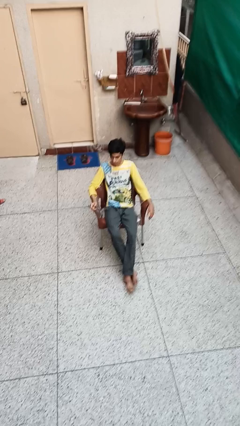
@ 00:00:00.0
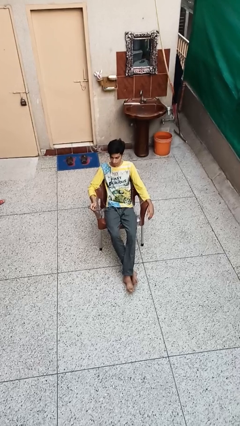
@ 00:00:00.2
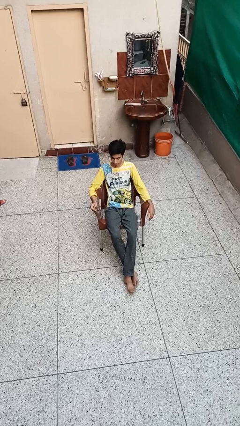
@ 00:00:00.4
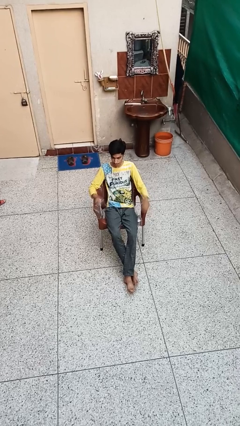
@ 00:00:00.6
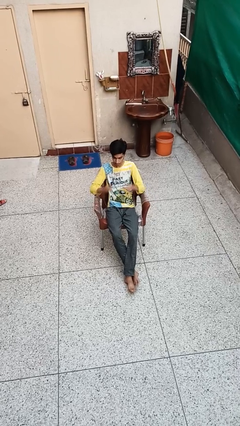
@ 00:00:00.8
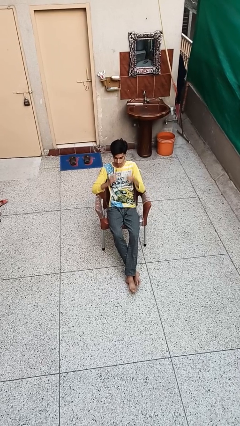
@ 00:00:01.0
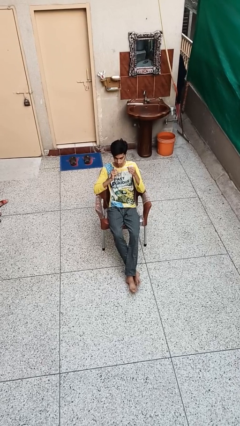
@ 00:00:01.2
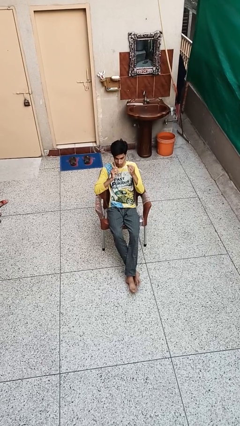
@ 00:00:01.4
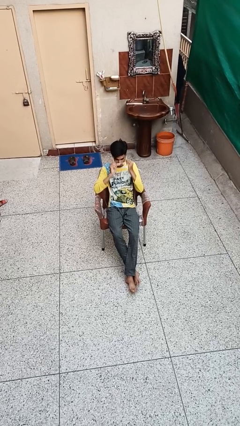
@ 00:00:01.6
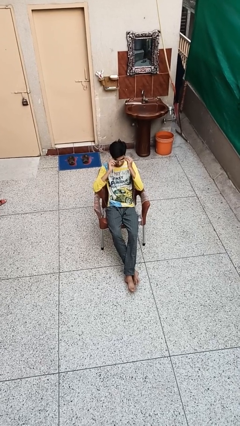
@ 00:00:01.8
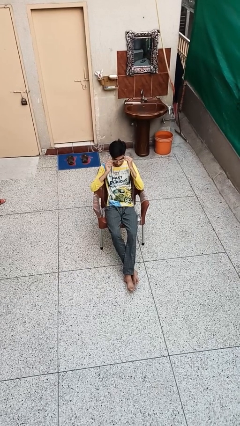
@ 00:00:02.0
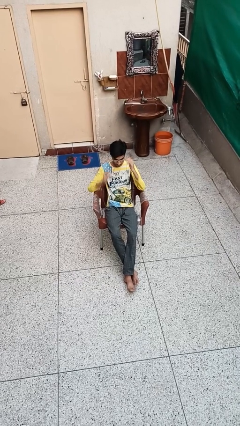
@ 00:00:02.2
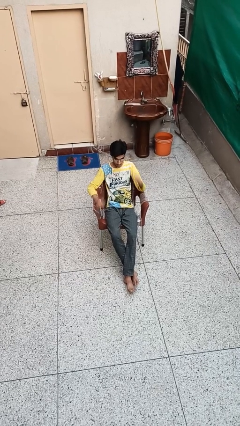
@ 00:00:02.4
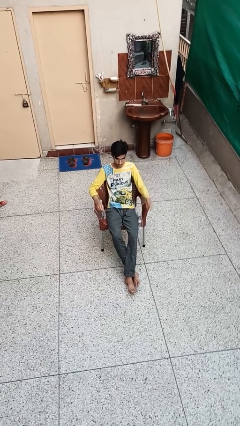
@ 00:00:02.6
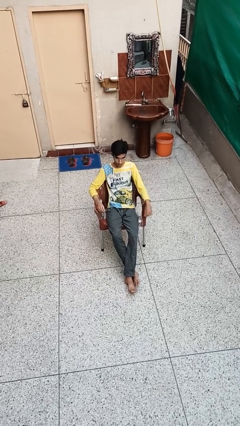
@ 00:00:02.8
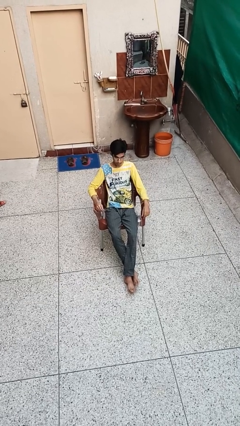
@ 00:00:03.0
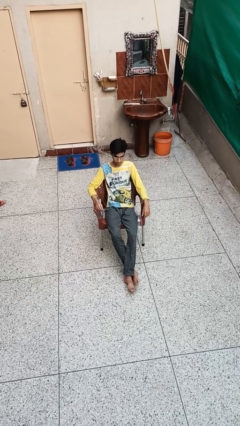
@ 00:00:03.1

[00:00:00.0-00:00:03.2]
person puts on glasses

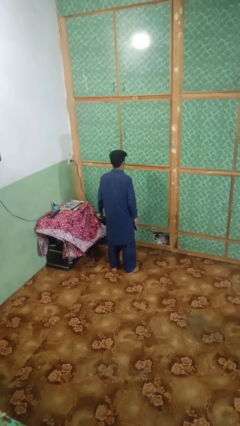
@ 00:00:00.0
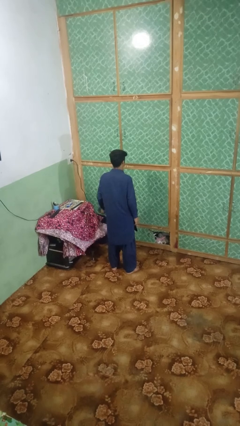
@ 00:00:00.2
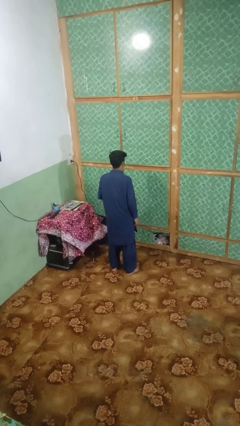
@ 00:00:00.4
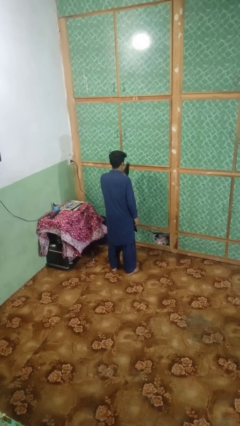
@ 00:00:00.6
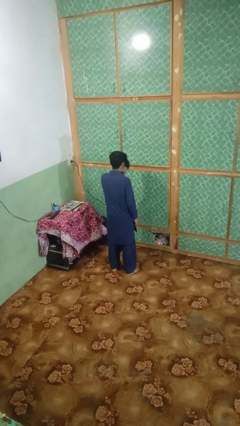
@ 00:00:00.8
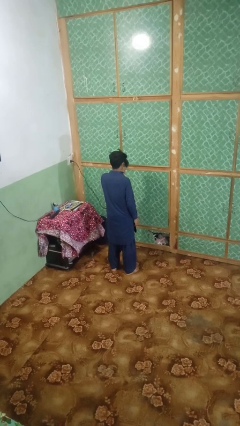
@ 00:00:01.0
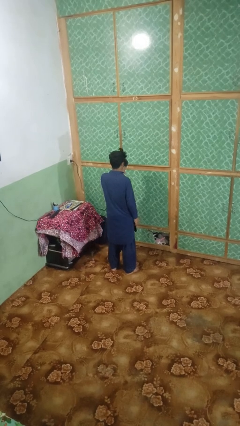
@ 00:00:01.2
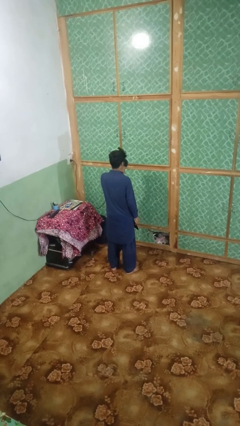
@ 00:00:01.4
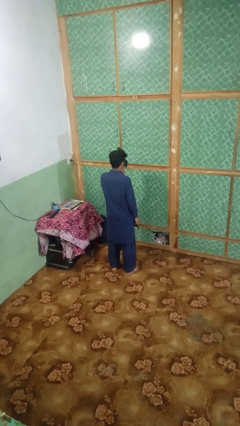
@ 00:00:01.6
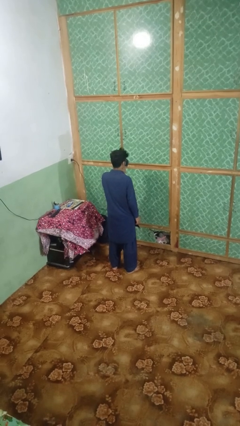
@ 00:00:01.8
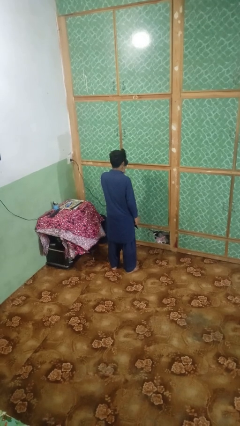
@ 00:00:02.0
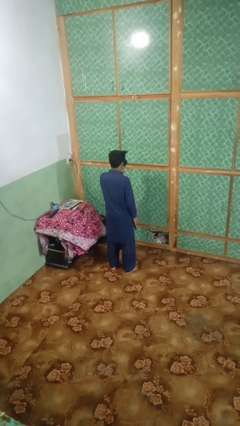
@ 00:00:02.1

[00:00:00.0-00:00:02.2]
person dries hair with hairdryer

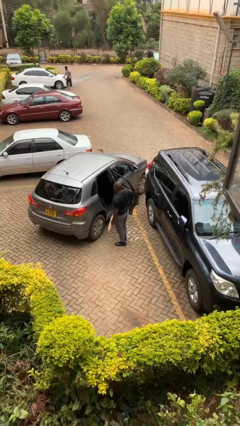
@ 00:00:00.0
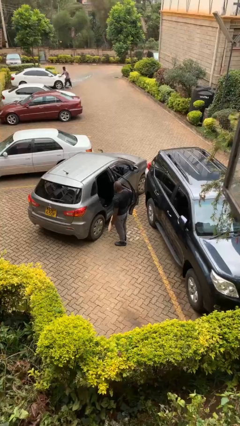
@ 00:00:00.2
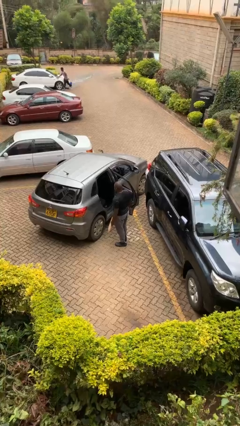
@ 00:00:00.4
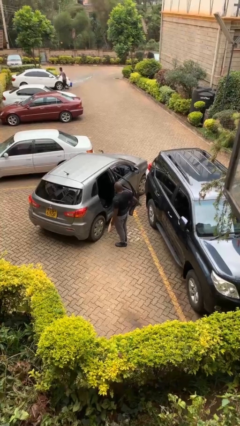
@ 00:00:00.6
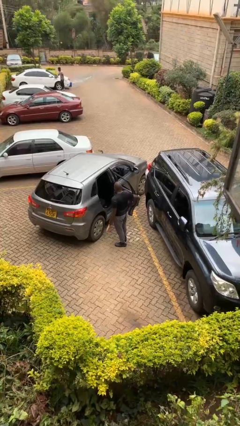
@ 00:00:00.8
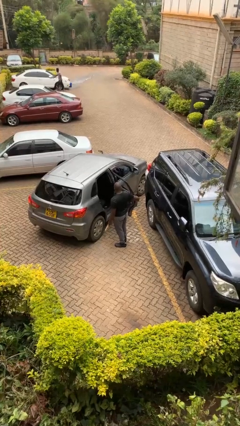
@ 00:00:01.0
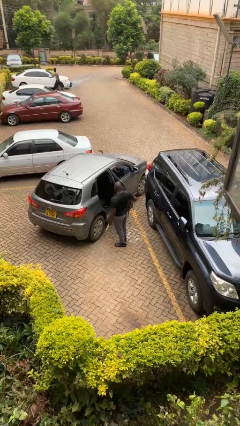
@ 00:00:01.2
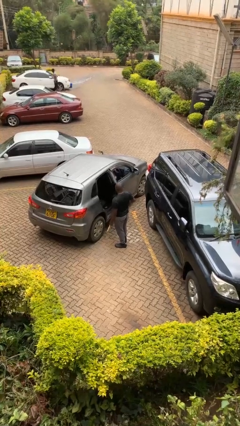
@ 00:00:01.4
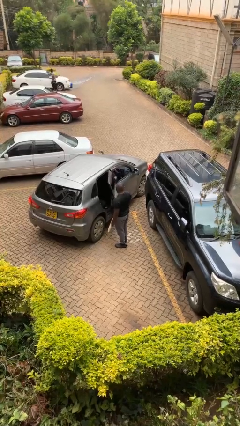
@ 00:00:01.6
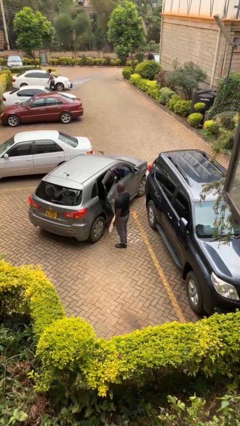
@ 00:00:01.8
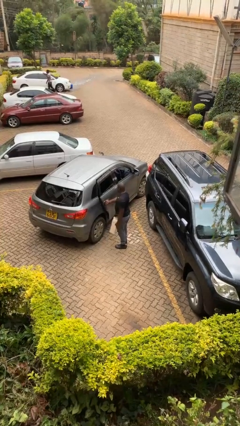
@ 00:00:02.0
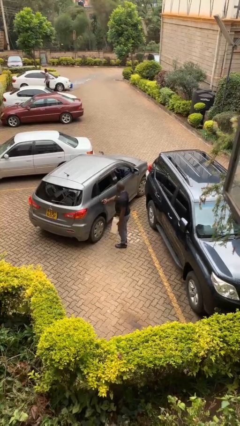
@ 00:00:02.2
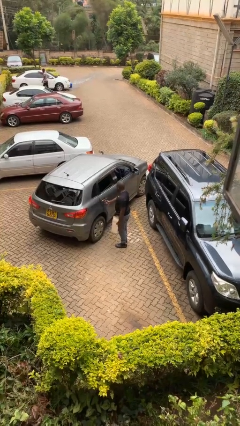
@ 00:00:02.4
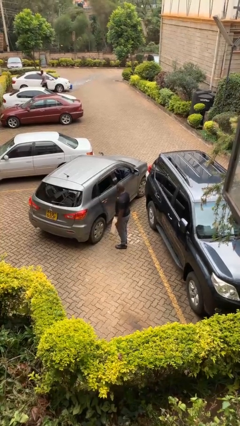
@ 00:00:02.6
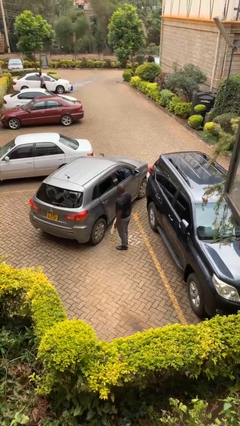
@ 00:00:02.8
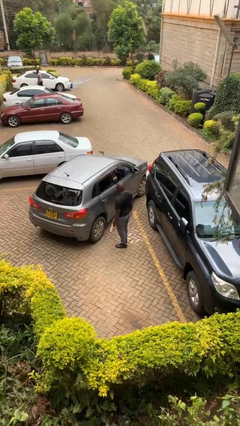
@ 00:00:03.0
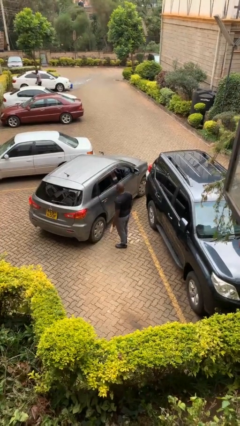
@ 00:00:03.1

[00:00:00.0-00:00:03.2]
person closes car door

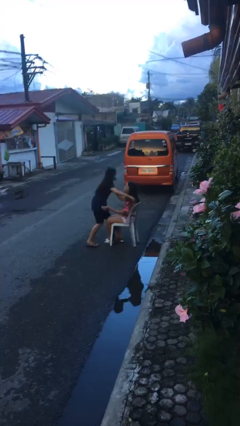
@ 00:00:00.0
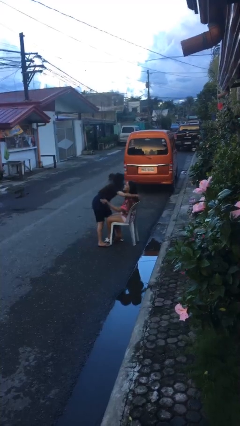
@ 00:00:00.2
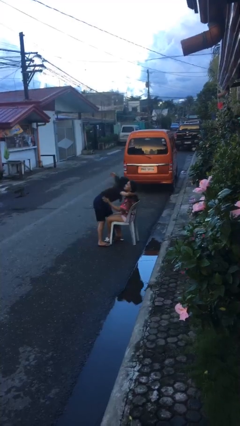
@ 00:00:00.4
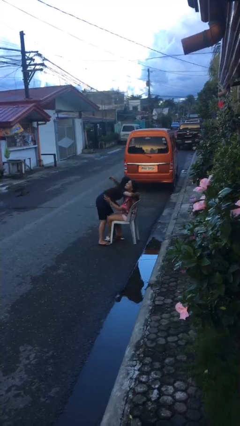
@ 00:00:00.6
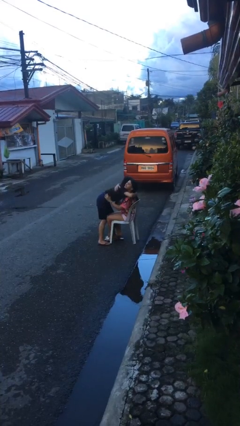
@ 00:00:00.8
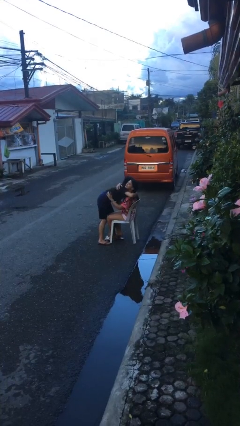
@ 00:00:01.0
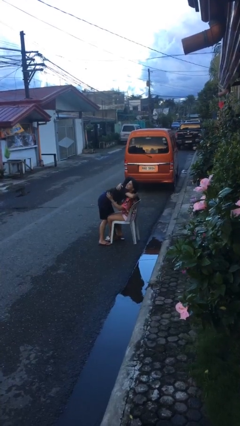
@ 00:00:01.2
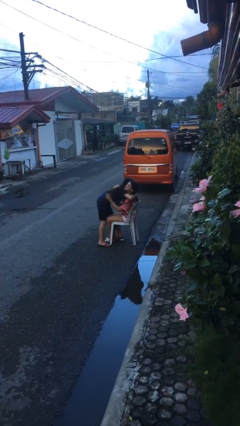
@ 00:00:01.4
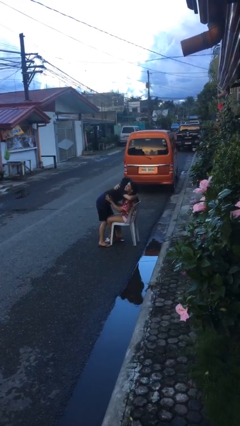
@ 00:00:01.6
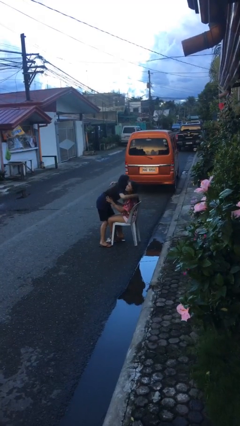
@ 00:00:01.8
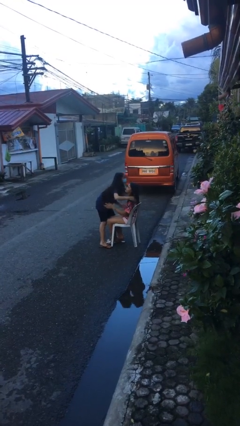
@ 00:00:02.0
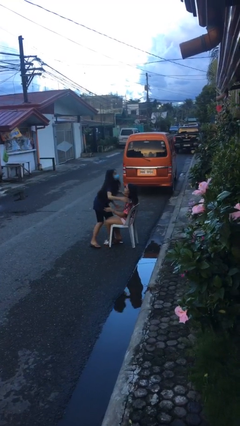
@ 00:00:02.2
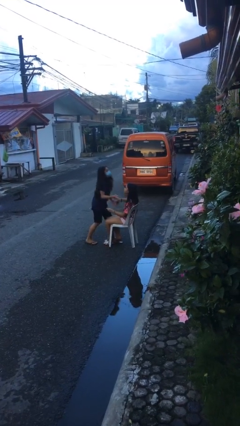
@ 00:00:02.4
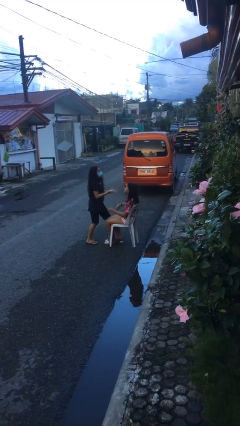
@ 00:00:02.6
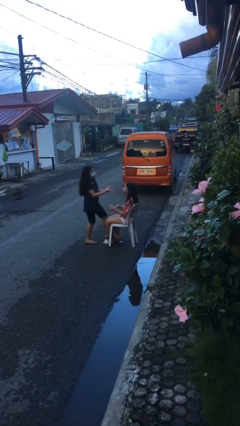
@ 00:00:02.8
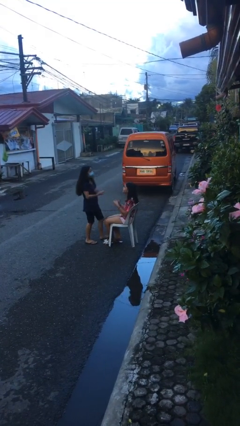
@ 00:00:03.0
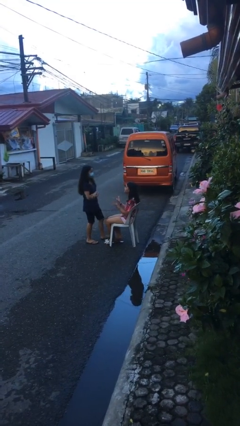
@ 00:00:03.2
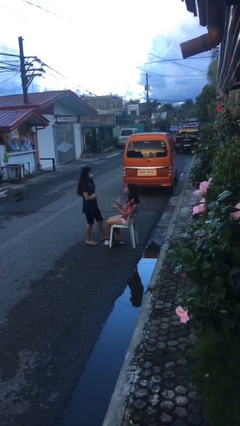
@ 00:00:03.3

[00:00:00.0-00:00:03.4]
person embraces person

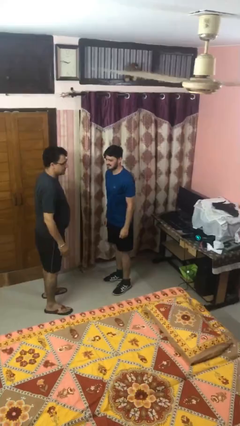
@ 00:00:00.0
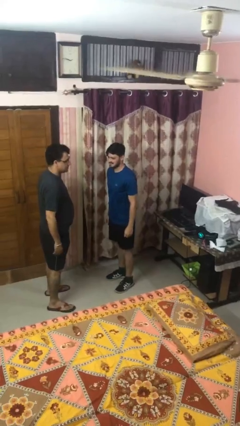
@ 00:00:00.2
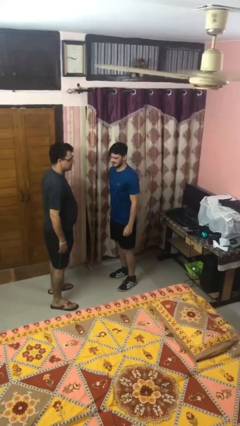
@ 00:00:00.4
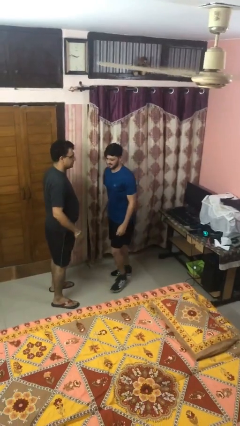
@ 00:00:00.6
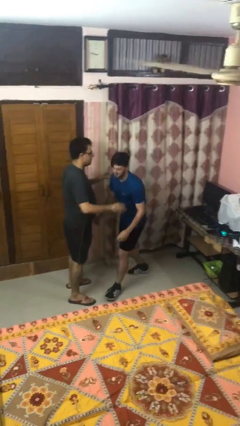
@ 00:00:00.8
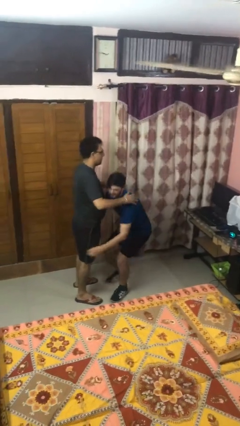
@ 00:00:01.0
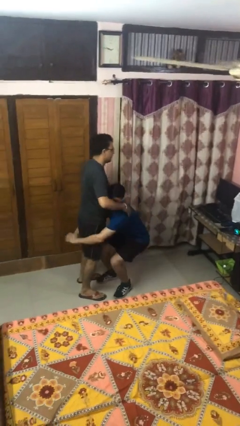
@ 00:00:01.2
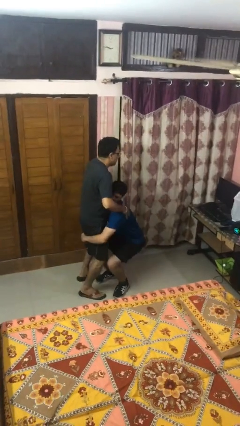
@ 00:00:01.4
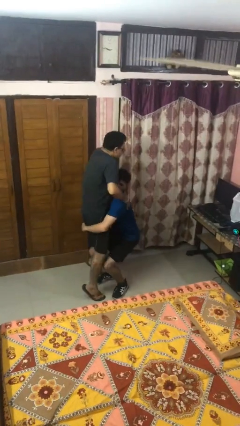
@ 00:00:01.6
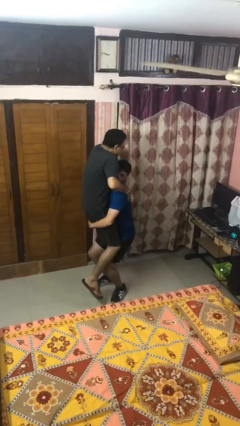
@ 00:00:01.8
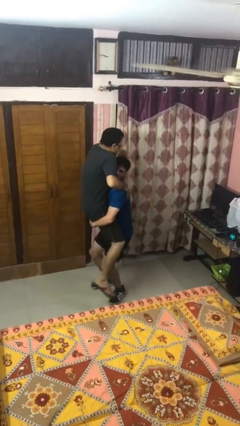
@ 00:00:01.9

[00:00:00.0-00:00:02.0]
person picks up person

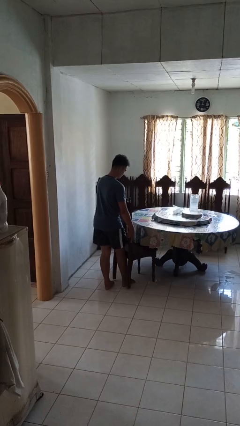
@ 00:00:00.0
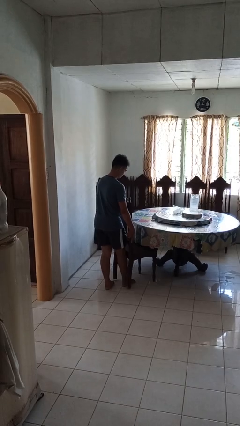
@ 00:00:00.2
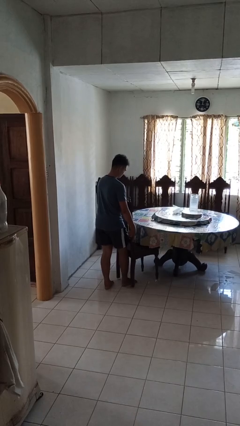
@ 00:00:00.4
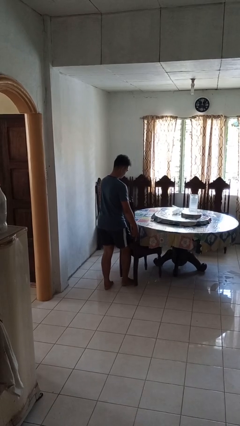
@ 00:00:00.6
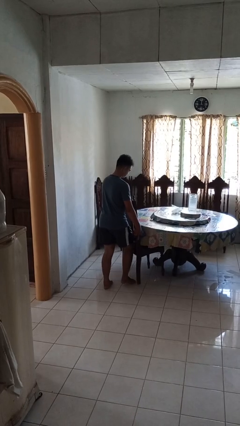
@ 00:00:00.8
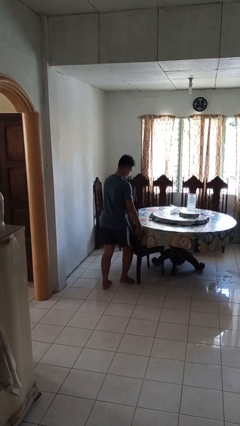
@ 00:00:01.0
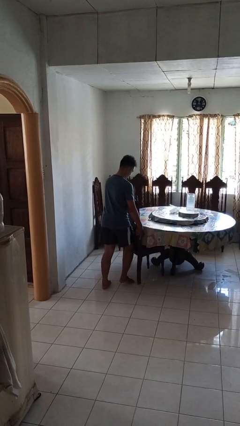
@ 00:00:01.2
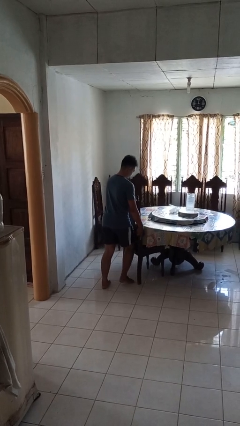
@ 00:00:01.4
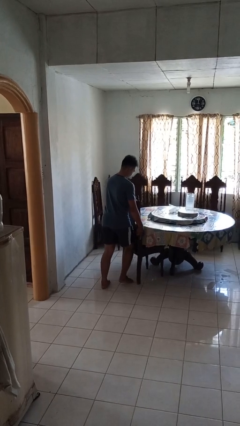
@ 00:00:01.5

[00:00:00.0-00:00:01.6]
person pushes in chair

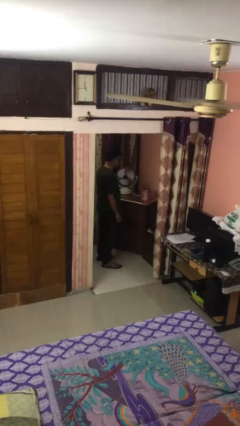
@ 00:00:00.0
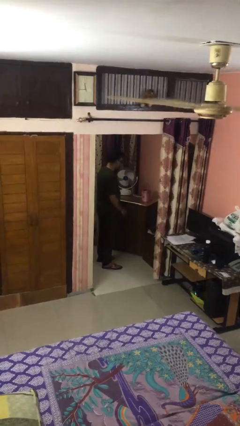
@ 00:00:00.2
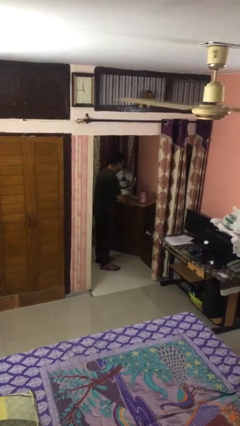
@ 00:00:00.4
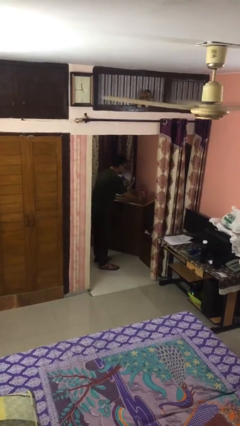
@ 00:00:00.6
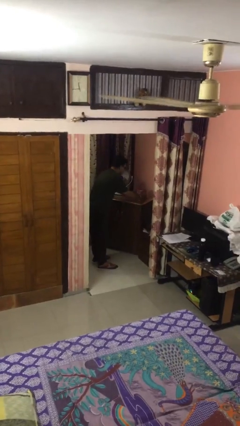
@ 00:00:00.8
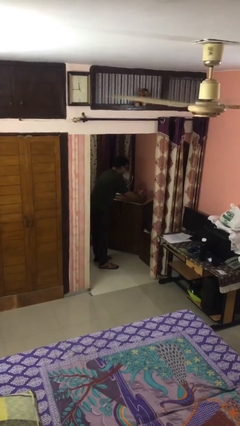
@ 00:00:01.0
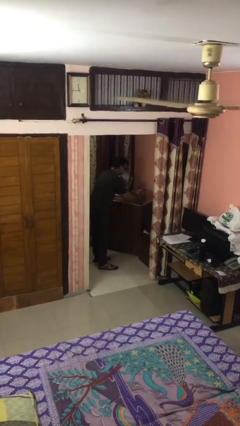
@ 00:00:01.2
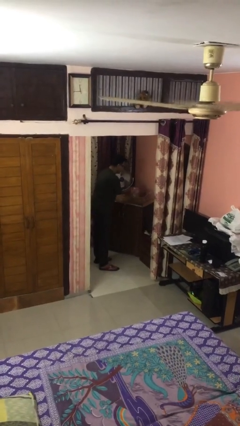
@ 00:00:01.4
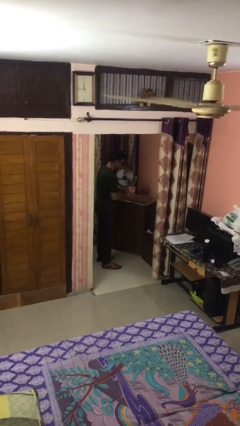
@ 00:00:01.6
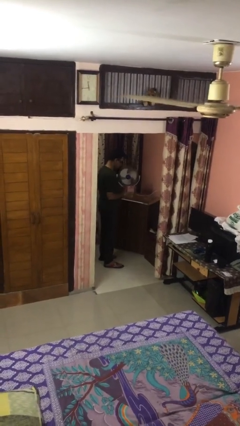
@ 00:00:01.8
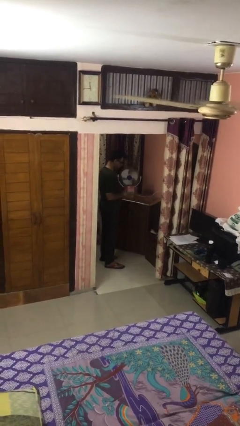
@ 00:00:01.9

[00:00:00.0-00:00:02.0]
person picks up object from countertop
